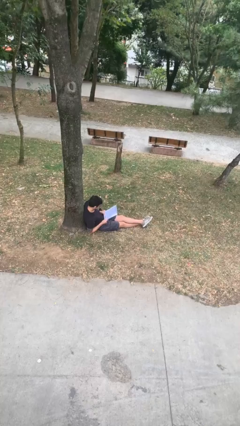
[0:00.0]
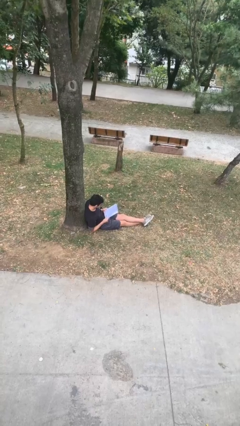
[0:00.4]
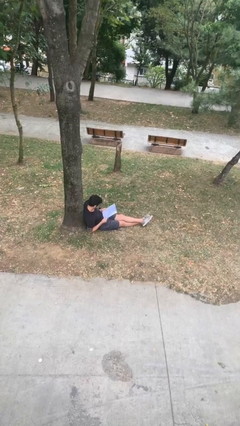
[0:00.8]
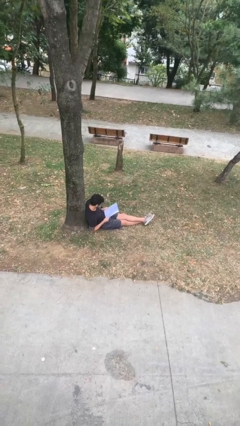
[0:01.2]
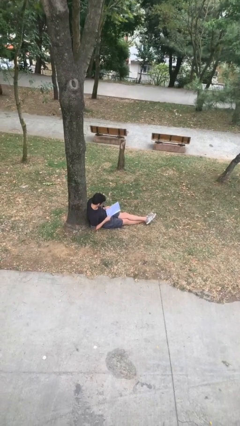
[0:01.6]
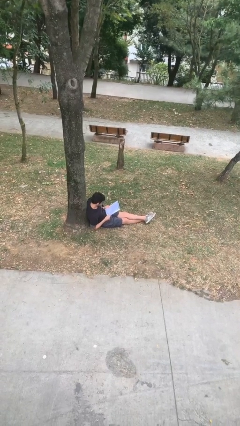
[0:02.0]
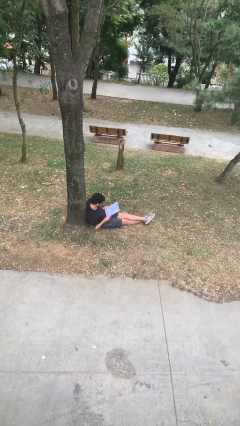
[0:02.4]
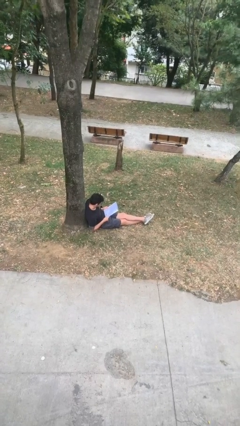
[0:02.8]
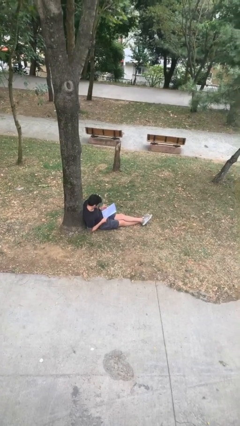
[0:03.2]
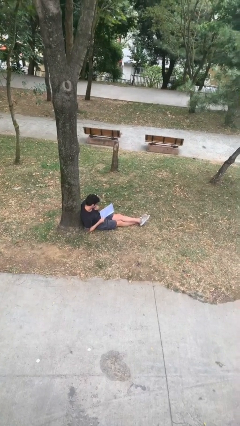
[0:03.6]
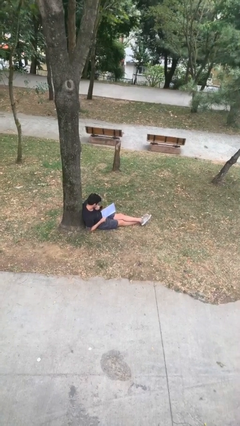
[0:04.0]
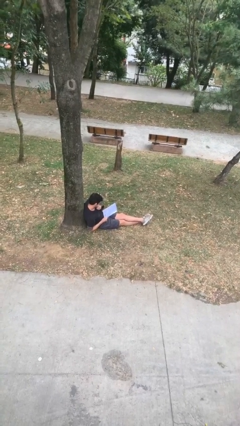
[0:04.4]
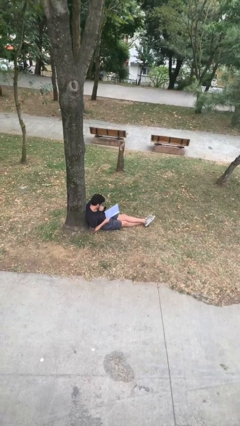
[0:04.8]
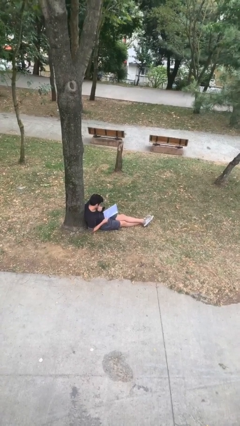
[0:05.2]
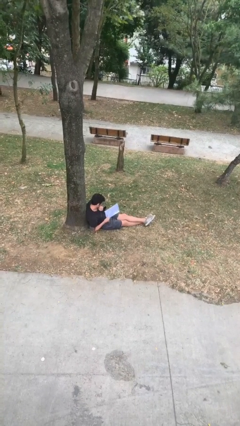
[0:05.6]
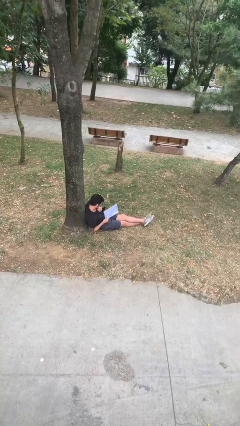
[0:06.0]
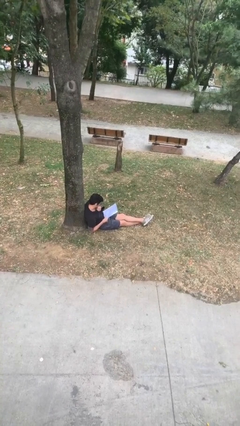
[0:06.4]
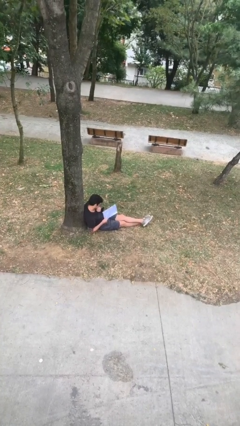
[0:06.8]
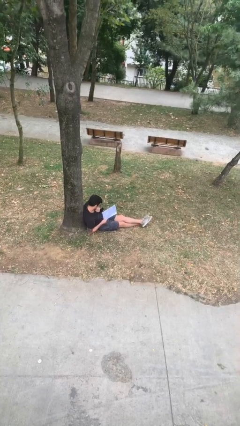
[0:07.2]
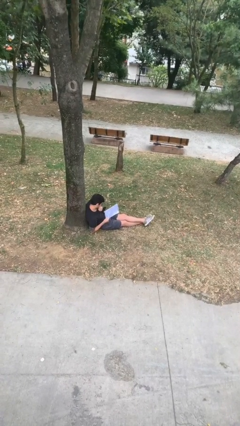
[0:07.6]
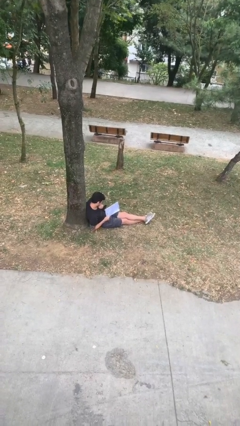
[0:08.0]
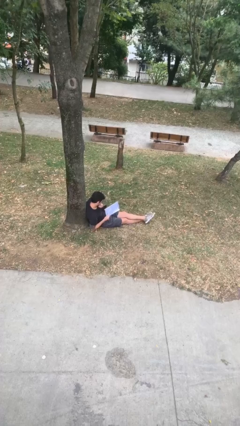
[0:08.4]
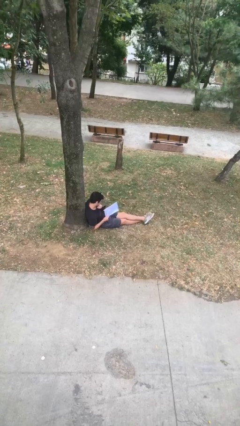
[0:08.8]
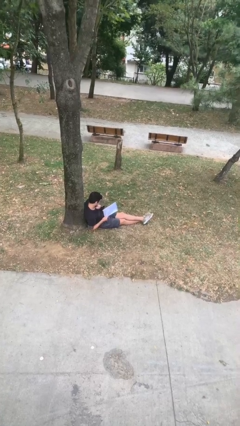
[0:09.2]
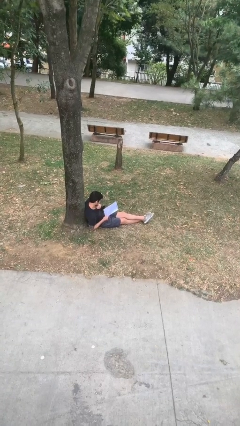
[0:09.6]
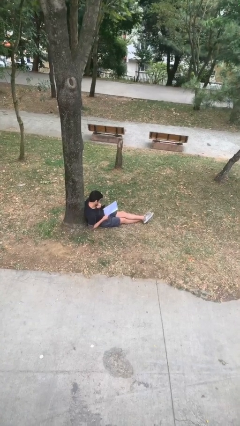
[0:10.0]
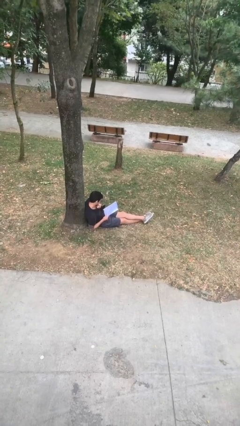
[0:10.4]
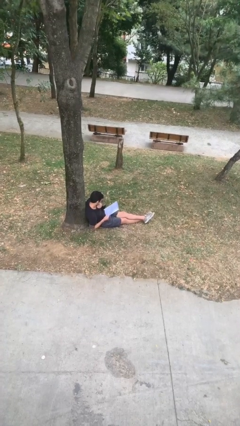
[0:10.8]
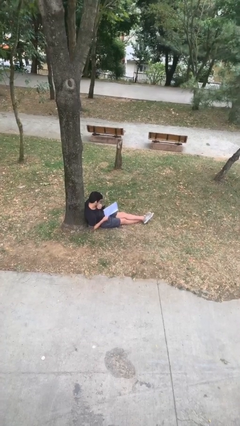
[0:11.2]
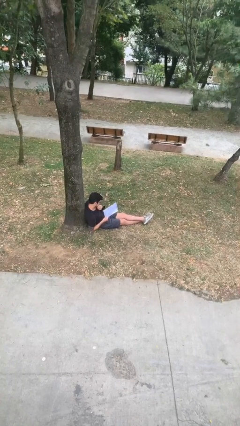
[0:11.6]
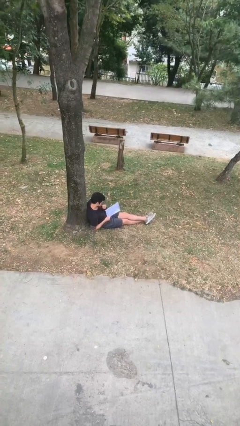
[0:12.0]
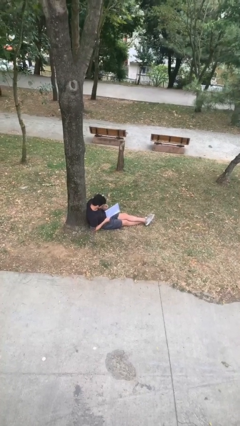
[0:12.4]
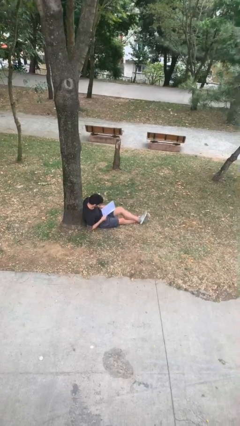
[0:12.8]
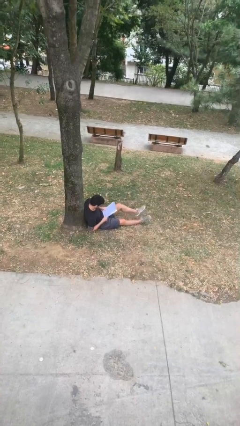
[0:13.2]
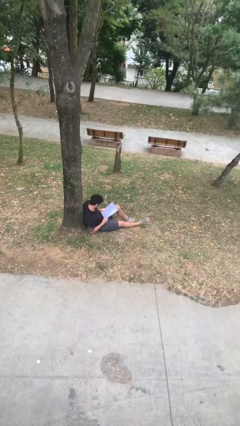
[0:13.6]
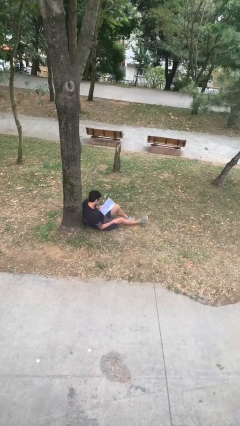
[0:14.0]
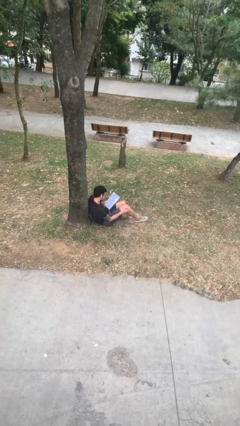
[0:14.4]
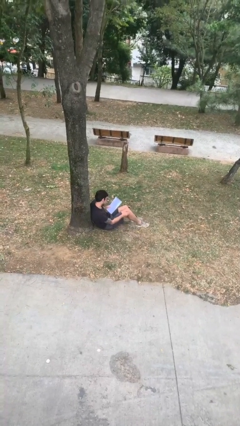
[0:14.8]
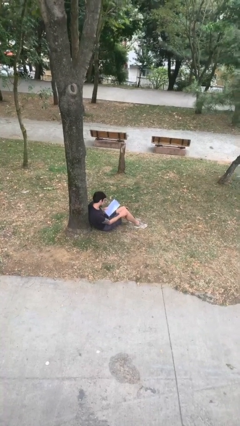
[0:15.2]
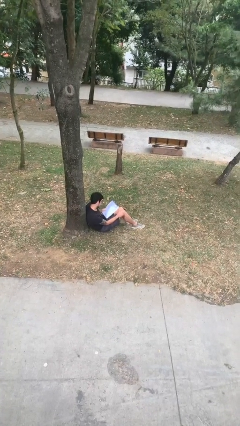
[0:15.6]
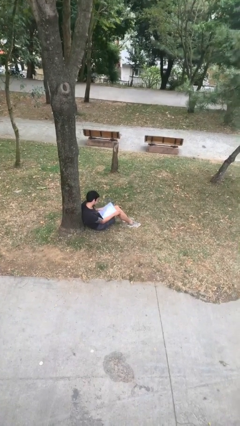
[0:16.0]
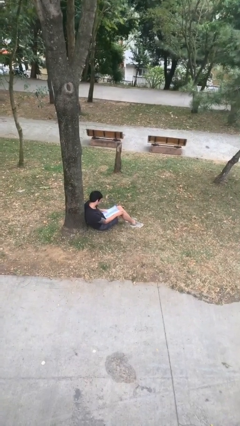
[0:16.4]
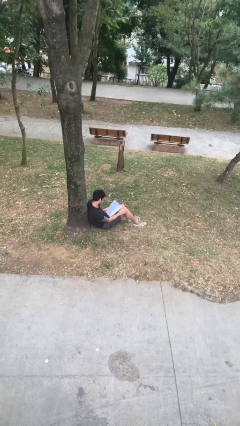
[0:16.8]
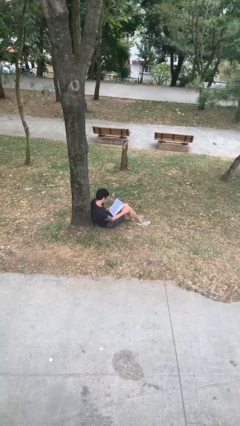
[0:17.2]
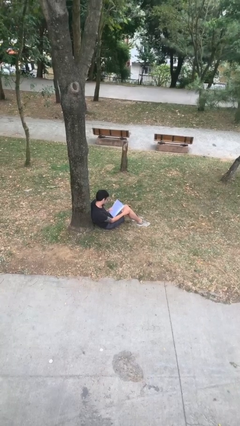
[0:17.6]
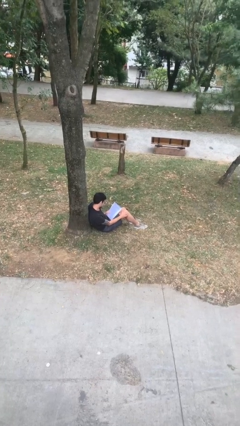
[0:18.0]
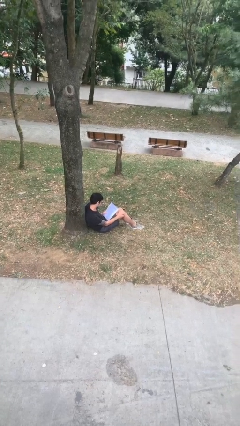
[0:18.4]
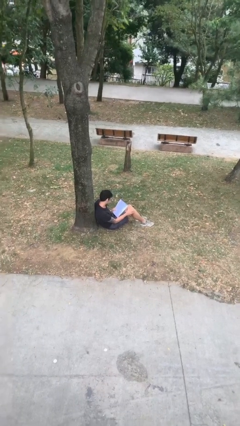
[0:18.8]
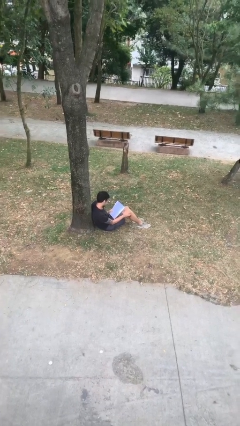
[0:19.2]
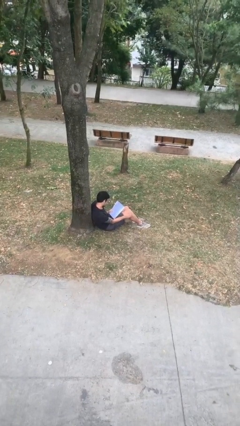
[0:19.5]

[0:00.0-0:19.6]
person reads document

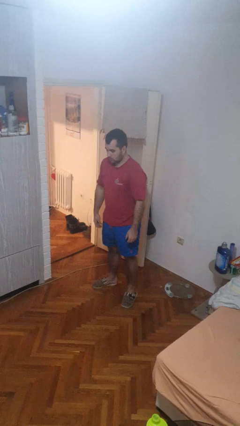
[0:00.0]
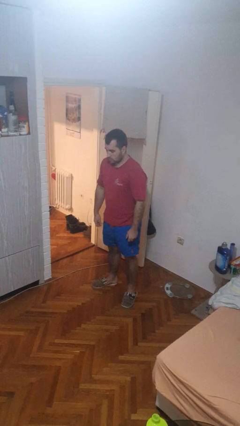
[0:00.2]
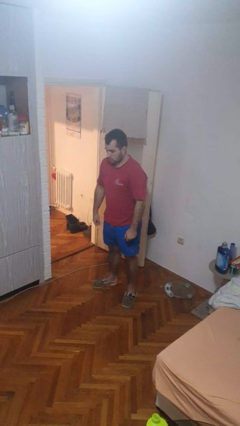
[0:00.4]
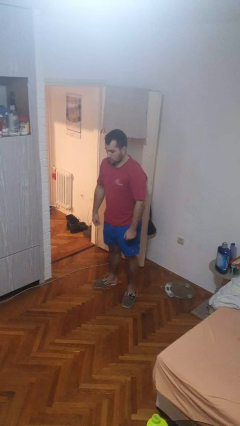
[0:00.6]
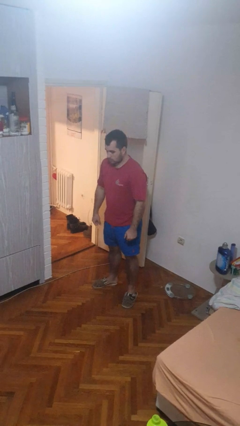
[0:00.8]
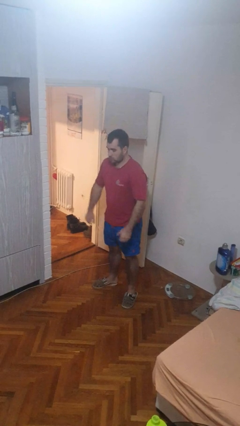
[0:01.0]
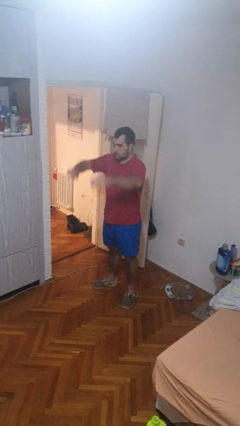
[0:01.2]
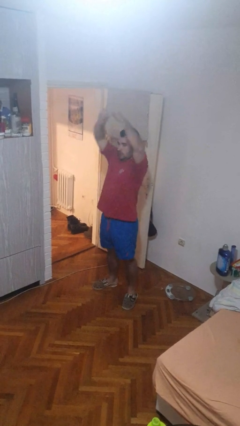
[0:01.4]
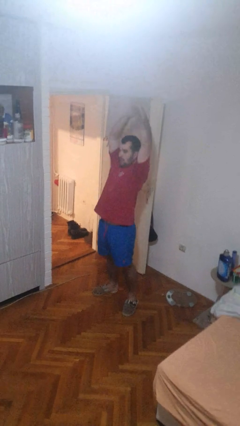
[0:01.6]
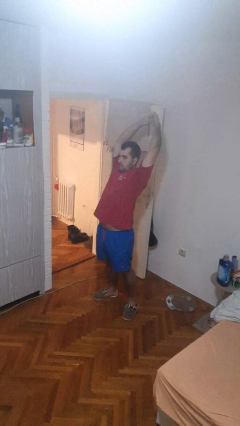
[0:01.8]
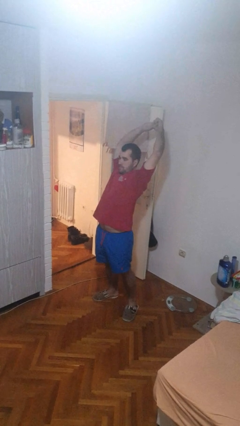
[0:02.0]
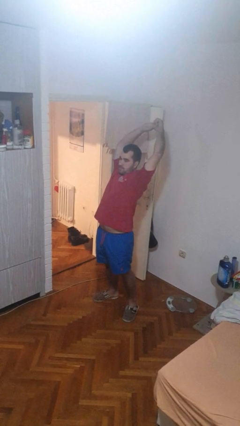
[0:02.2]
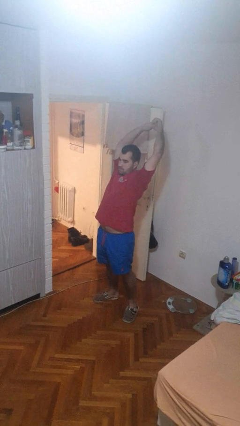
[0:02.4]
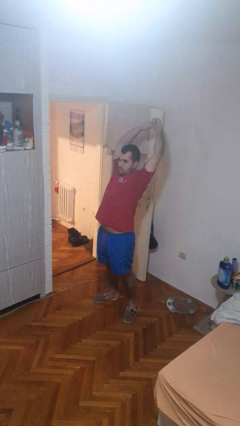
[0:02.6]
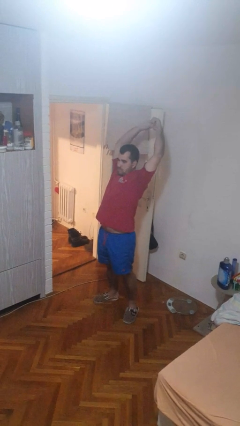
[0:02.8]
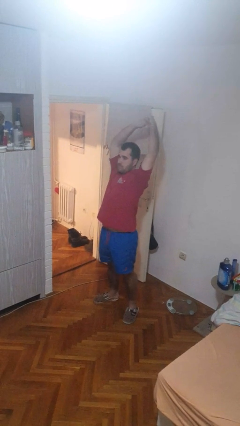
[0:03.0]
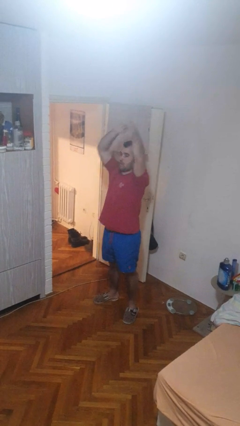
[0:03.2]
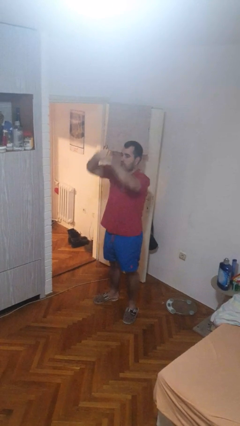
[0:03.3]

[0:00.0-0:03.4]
person stretches arms over head

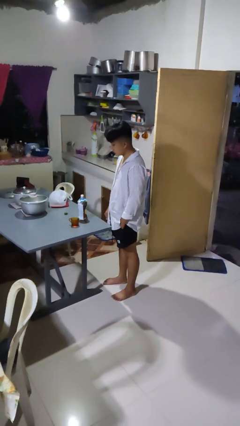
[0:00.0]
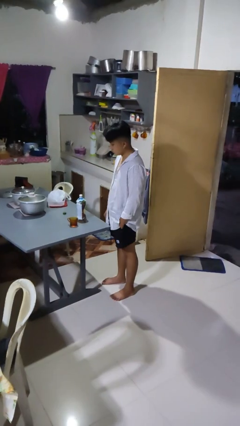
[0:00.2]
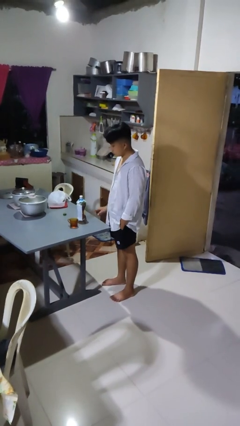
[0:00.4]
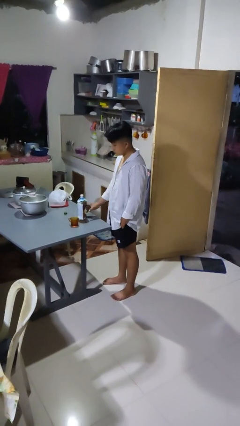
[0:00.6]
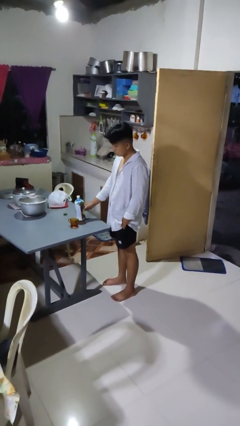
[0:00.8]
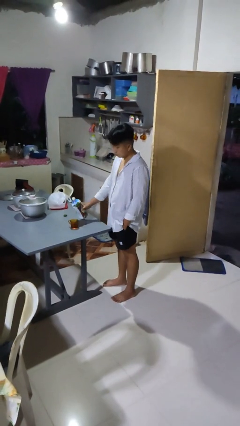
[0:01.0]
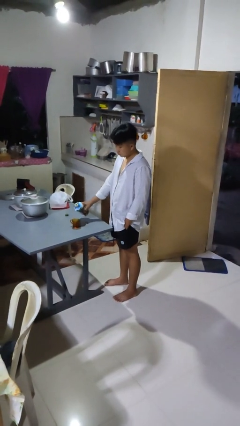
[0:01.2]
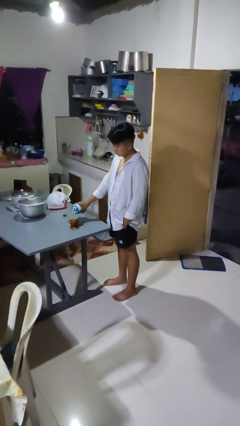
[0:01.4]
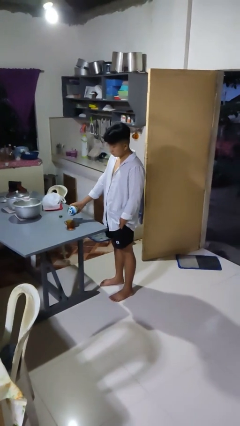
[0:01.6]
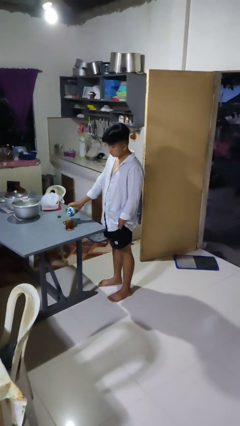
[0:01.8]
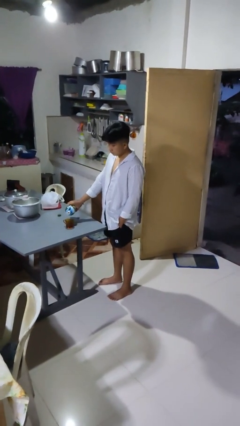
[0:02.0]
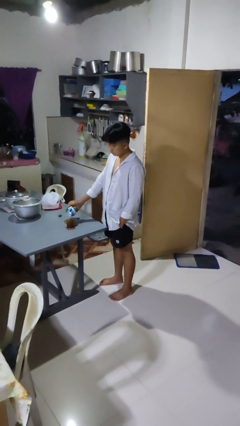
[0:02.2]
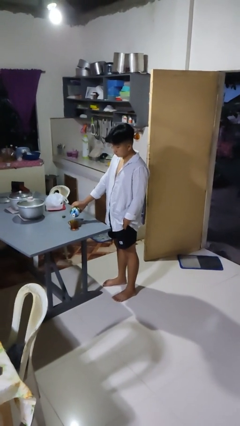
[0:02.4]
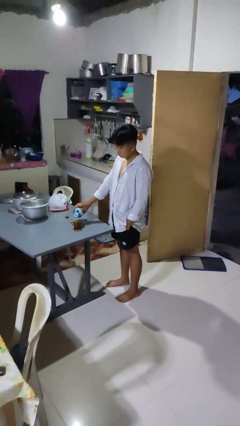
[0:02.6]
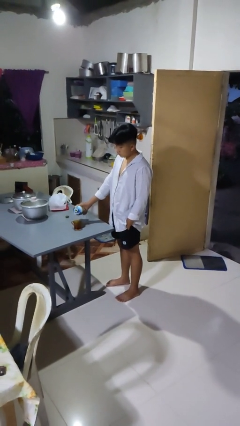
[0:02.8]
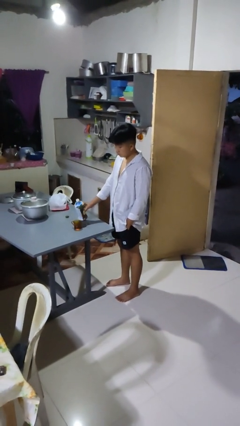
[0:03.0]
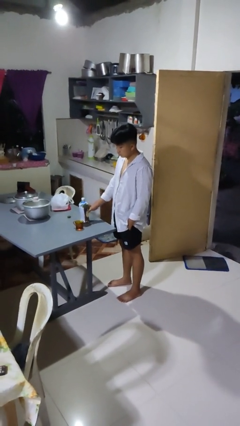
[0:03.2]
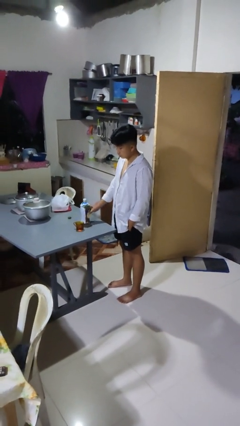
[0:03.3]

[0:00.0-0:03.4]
person pours liquid into cup

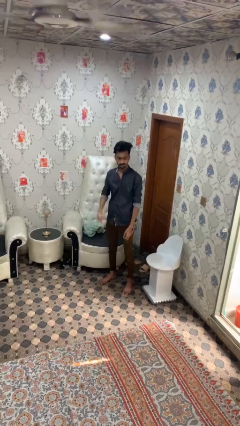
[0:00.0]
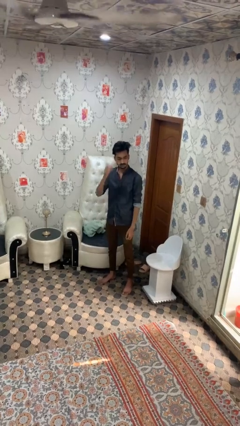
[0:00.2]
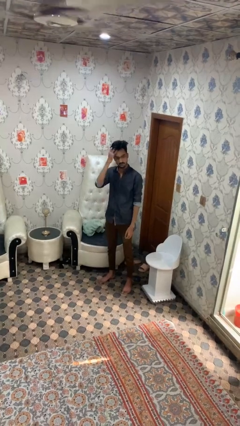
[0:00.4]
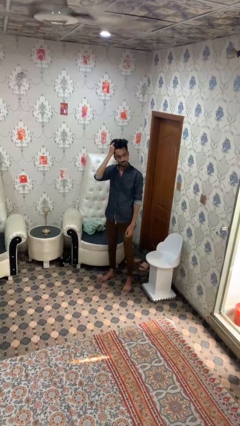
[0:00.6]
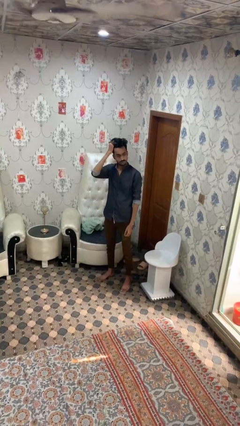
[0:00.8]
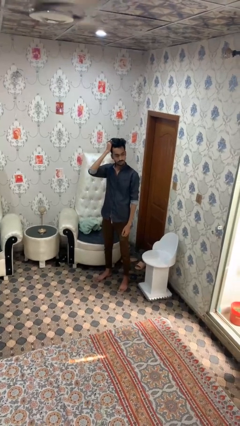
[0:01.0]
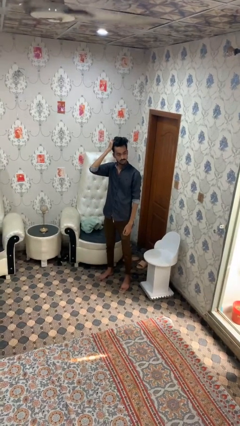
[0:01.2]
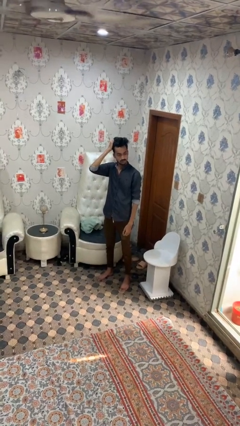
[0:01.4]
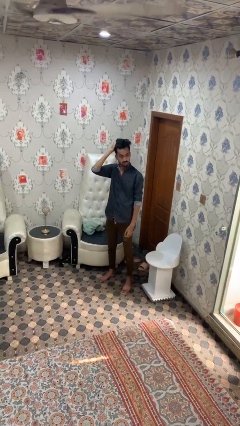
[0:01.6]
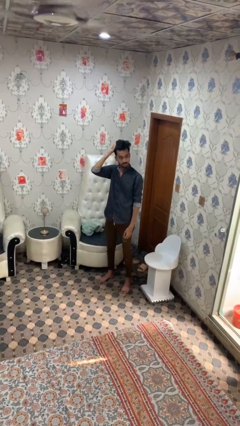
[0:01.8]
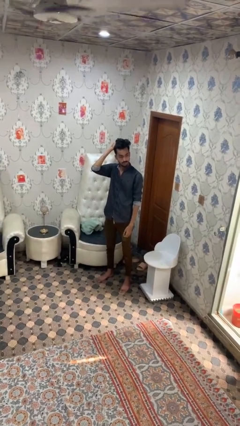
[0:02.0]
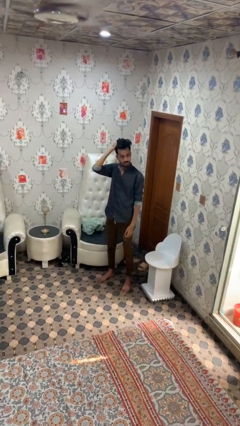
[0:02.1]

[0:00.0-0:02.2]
person strokes hair
